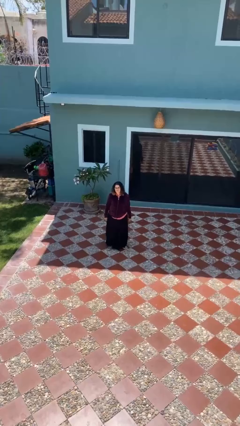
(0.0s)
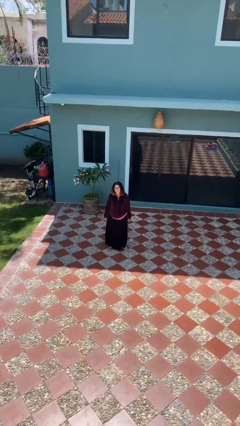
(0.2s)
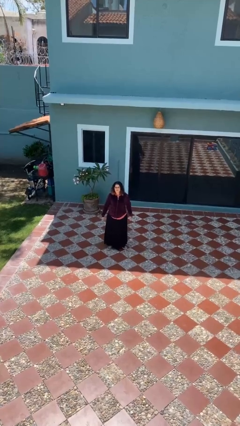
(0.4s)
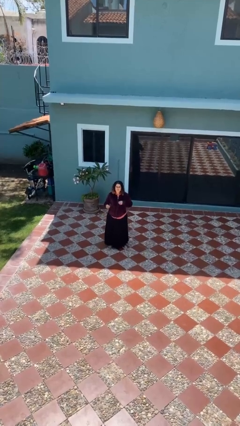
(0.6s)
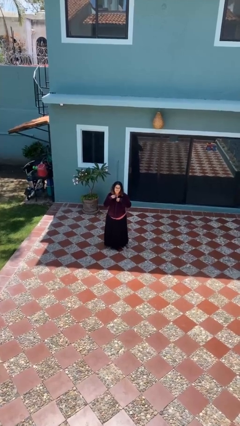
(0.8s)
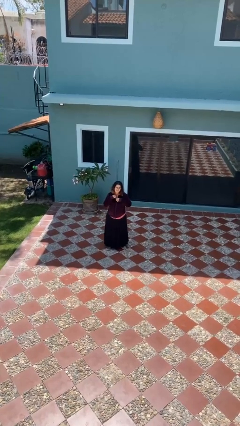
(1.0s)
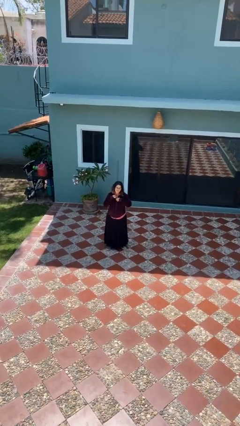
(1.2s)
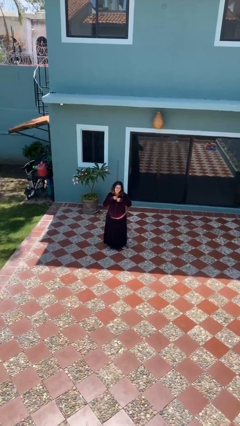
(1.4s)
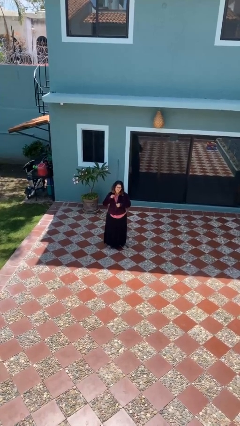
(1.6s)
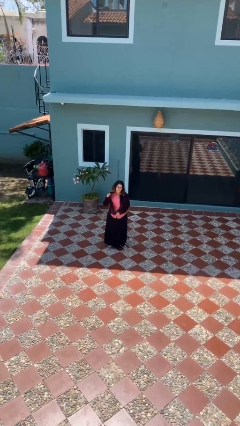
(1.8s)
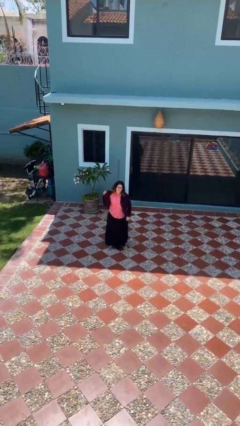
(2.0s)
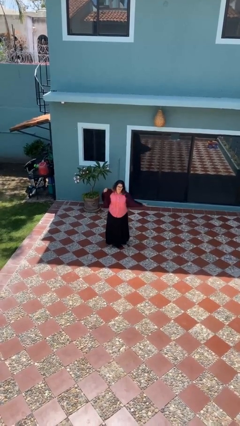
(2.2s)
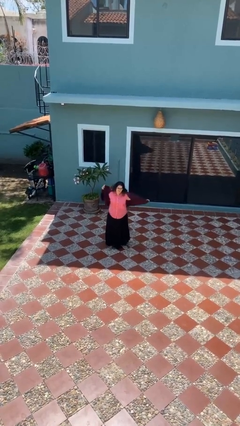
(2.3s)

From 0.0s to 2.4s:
person unzips jacket

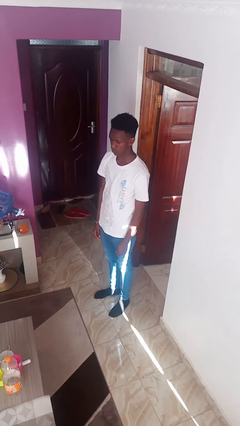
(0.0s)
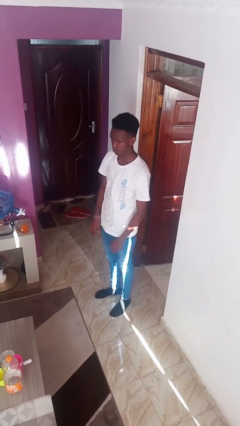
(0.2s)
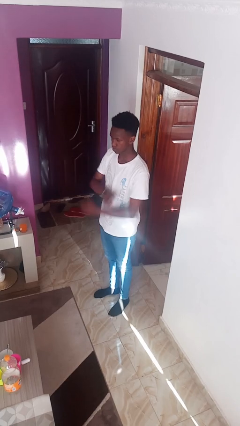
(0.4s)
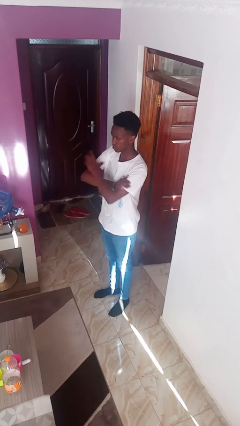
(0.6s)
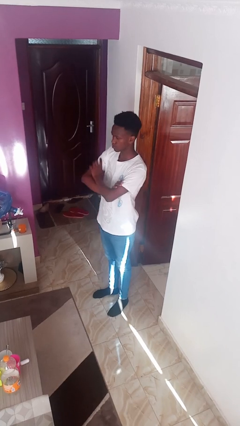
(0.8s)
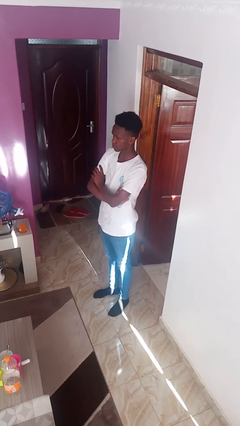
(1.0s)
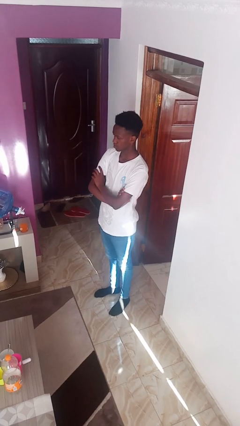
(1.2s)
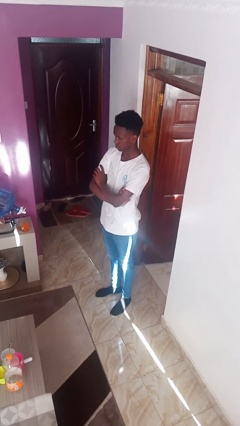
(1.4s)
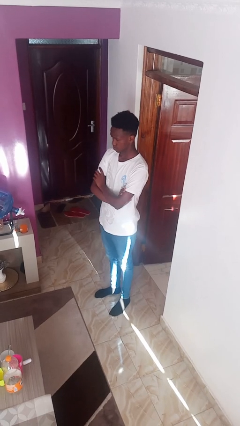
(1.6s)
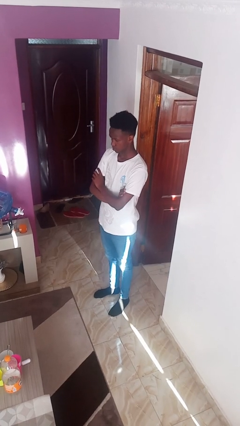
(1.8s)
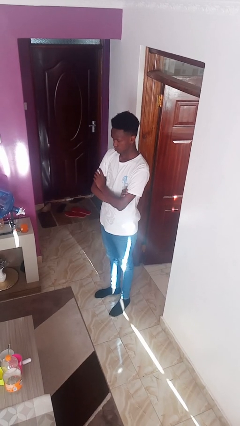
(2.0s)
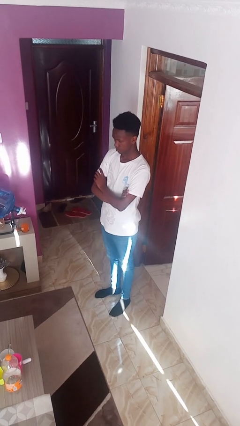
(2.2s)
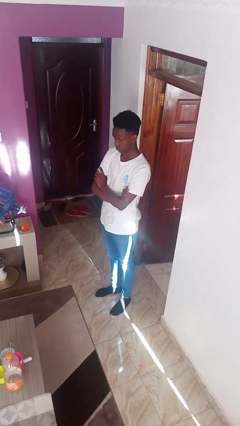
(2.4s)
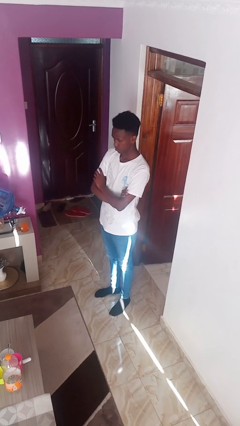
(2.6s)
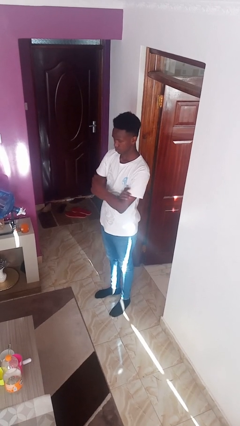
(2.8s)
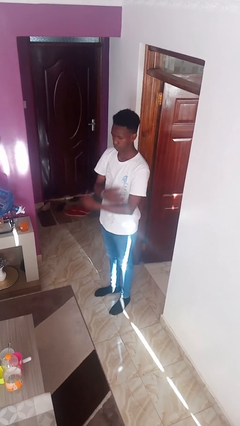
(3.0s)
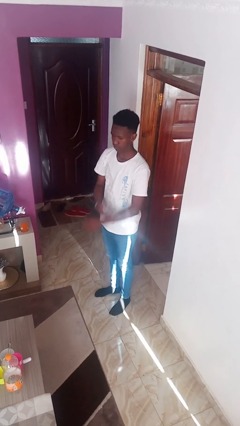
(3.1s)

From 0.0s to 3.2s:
person crosses arms

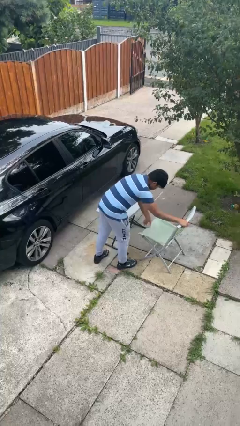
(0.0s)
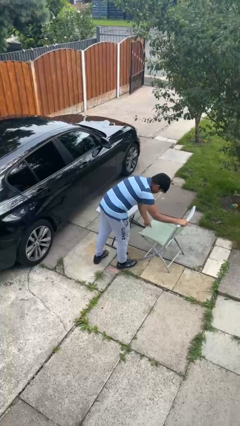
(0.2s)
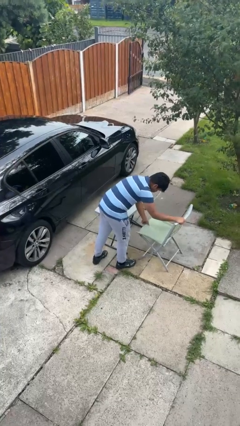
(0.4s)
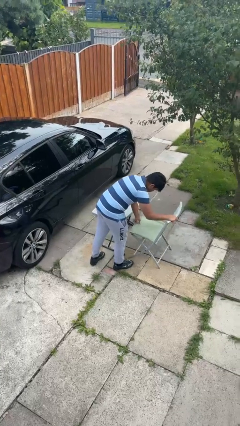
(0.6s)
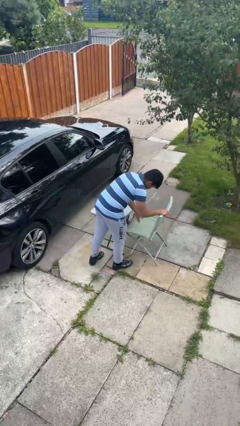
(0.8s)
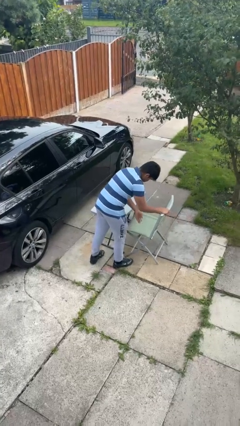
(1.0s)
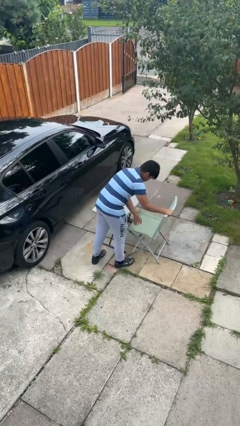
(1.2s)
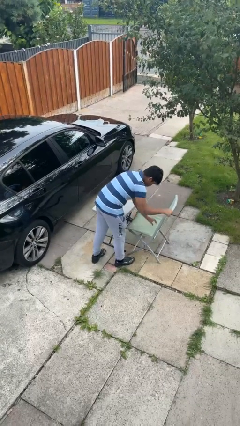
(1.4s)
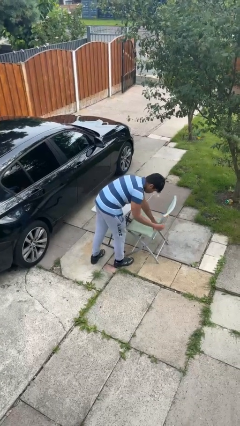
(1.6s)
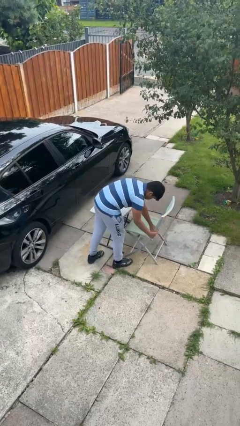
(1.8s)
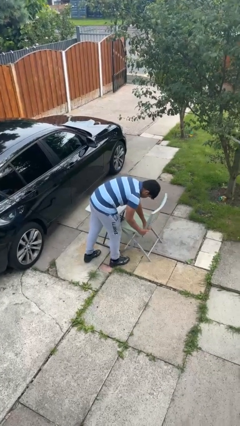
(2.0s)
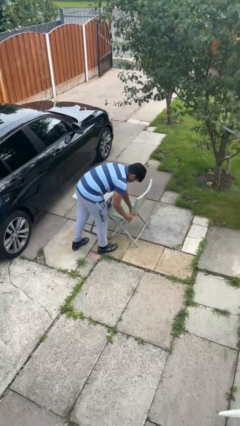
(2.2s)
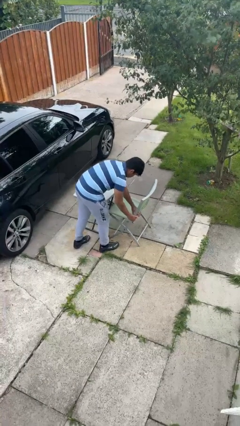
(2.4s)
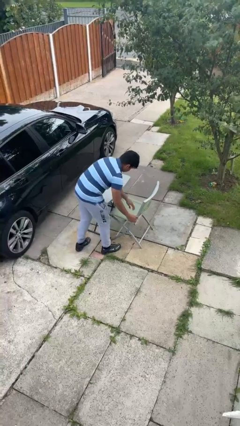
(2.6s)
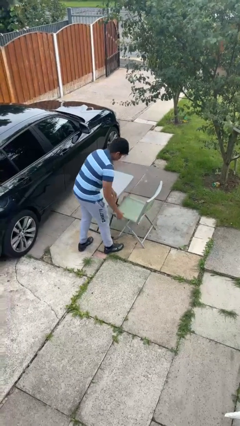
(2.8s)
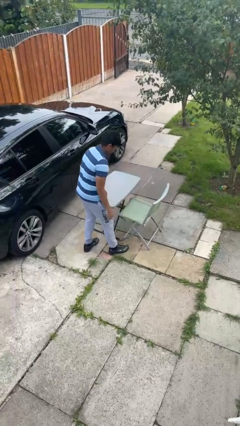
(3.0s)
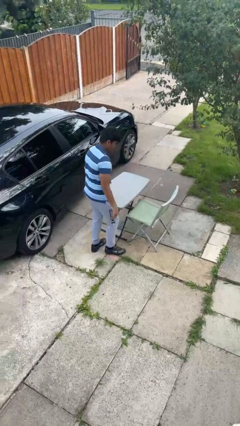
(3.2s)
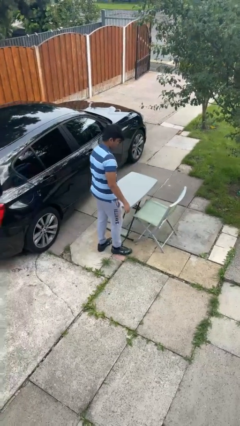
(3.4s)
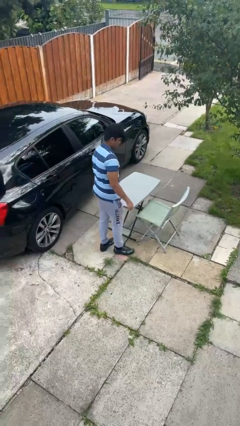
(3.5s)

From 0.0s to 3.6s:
person pushes in chair

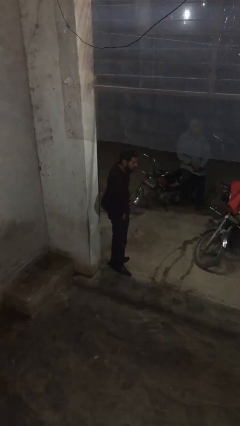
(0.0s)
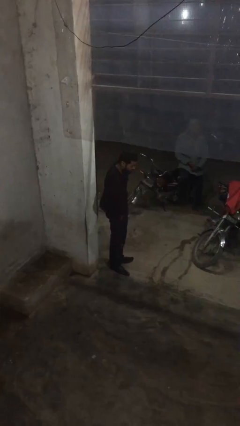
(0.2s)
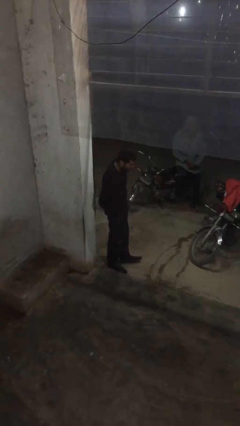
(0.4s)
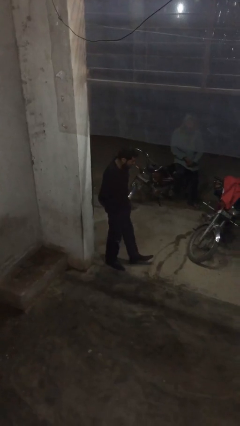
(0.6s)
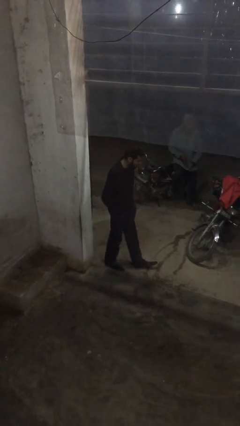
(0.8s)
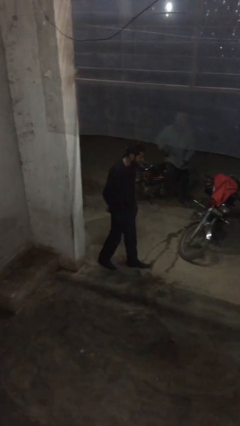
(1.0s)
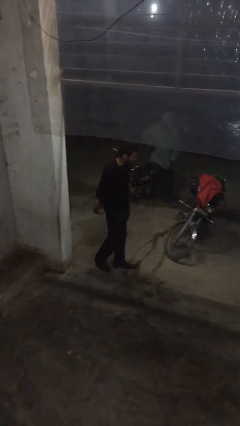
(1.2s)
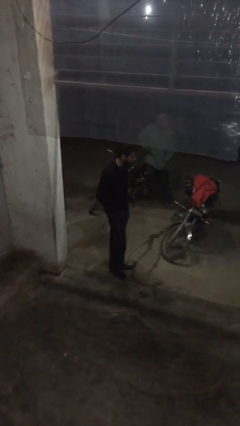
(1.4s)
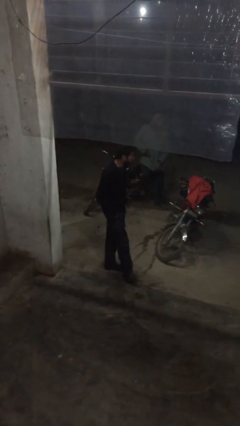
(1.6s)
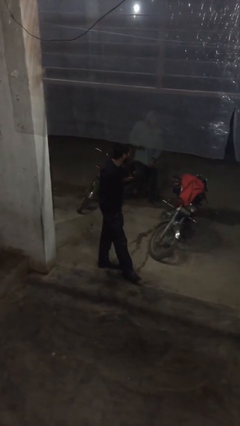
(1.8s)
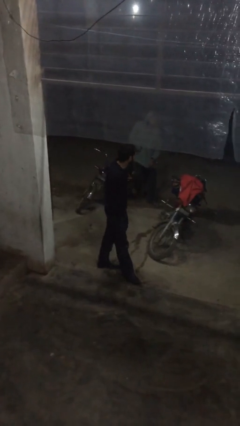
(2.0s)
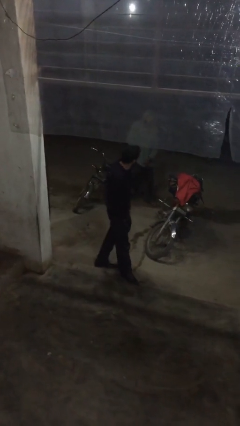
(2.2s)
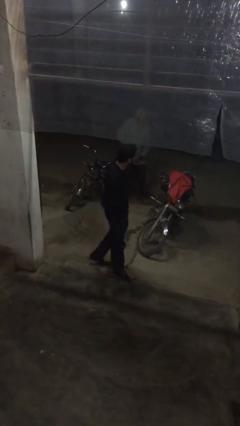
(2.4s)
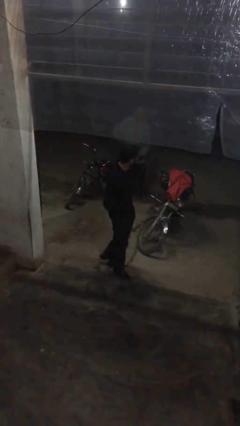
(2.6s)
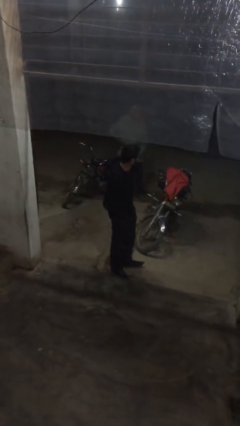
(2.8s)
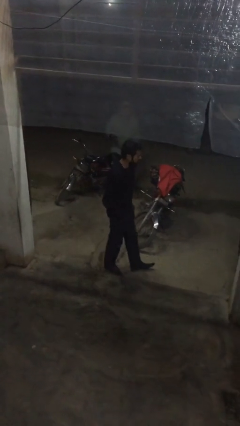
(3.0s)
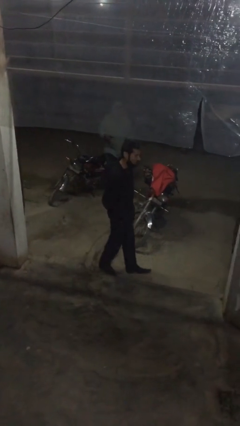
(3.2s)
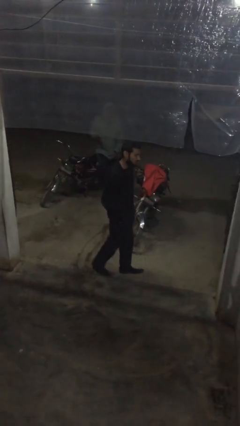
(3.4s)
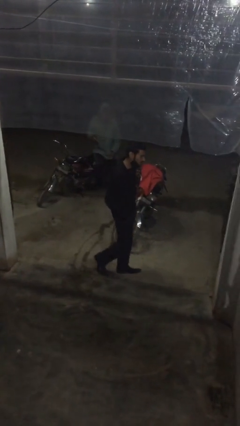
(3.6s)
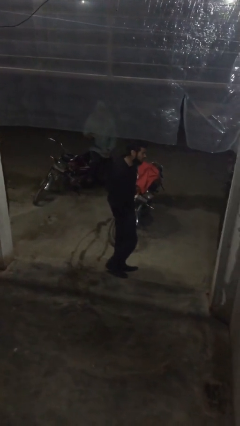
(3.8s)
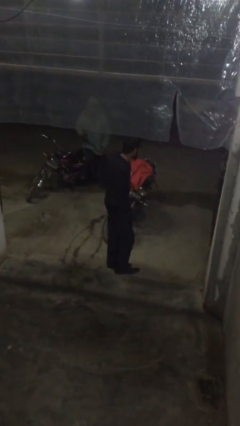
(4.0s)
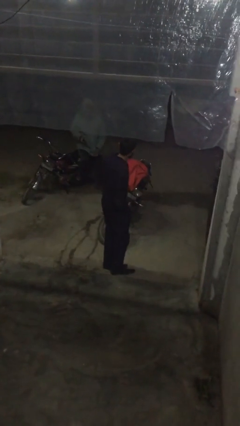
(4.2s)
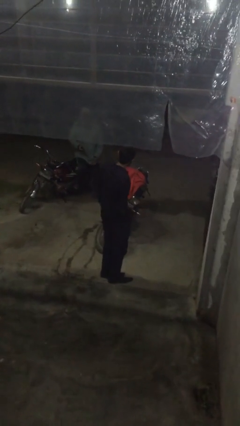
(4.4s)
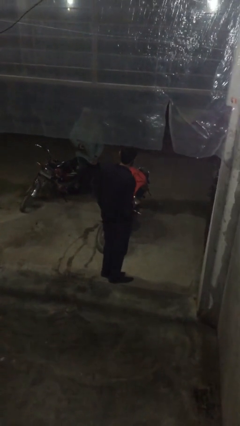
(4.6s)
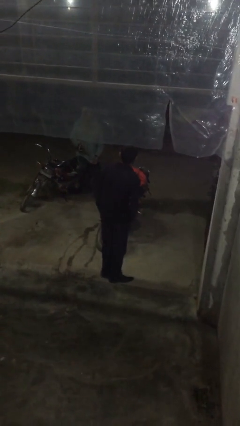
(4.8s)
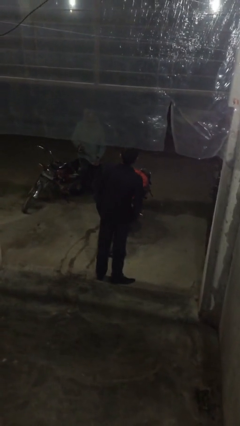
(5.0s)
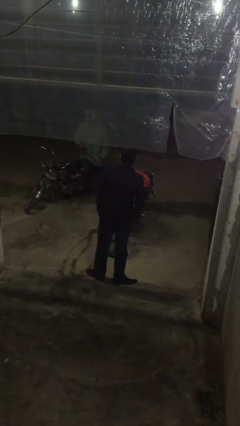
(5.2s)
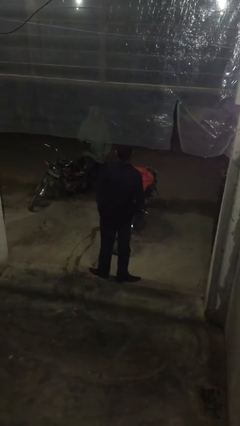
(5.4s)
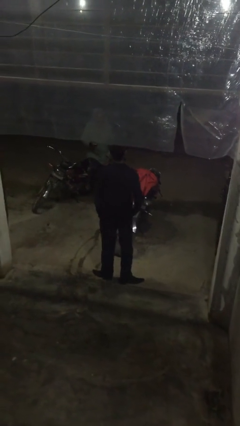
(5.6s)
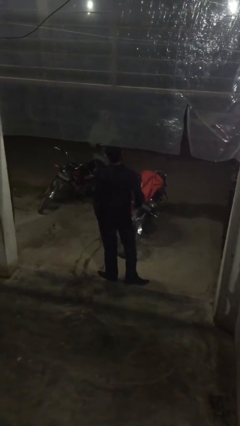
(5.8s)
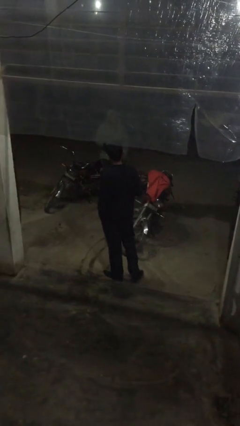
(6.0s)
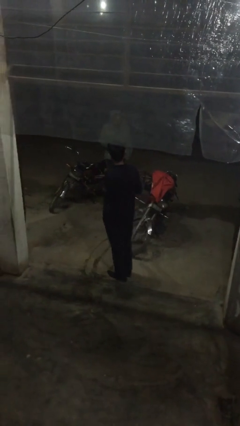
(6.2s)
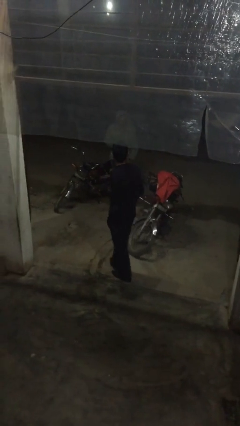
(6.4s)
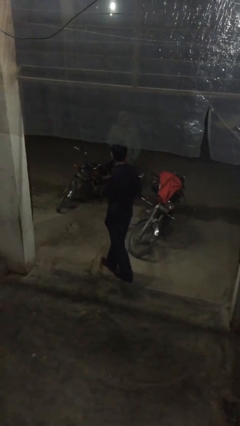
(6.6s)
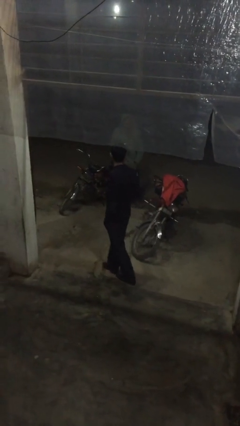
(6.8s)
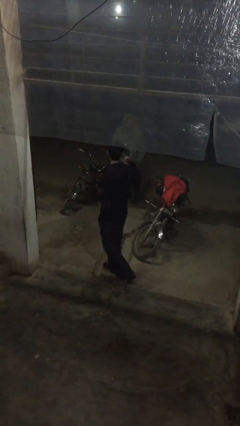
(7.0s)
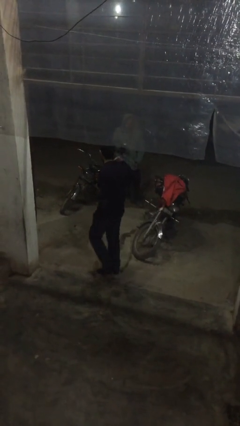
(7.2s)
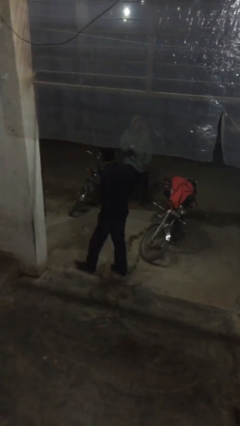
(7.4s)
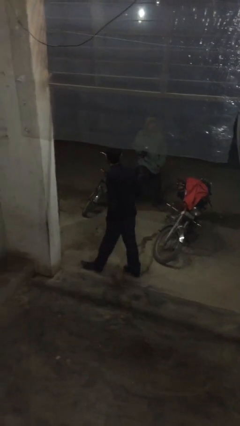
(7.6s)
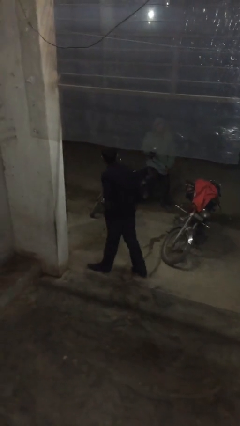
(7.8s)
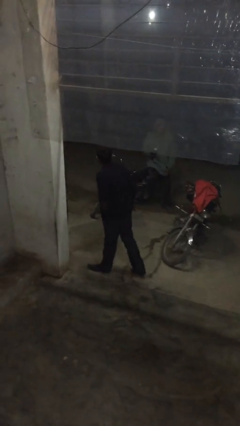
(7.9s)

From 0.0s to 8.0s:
person walks

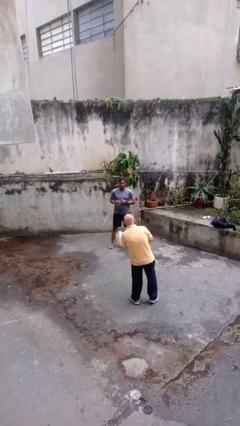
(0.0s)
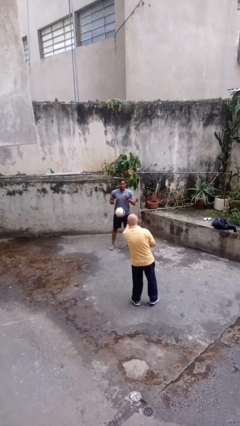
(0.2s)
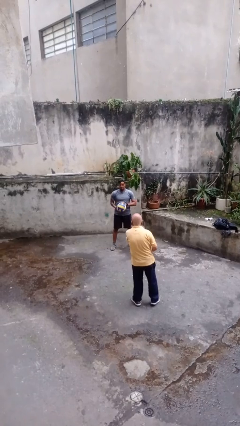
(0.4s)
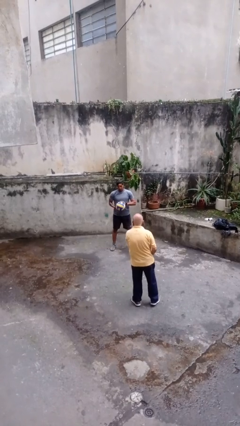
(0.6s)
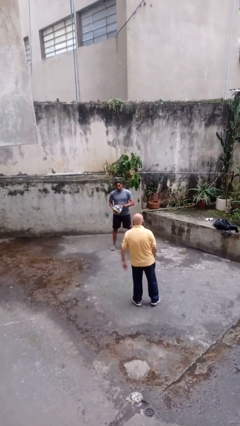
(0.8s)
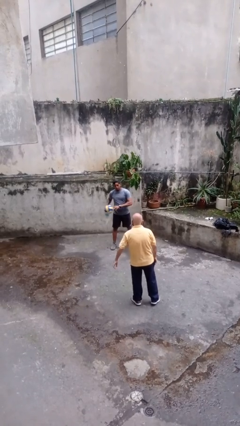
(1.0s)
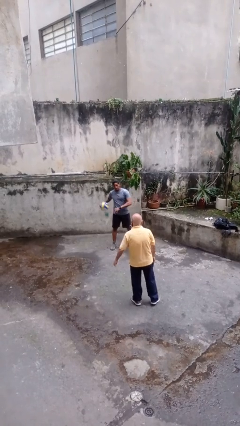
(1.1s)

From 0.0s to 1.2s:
person catches object from person
